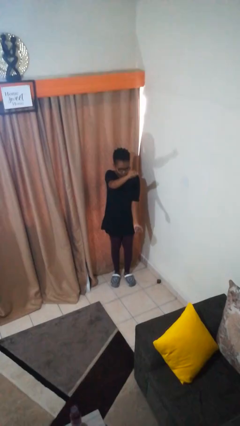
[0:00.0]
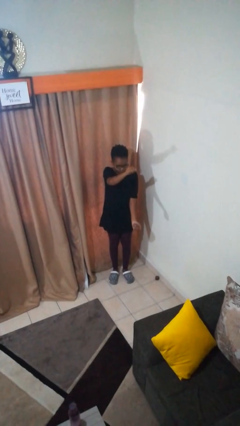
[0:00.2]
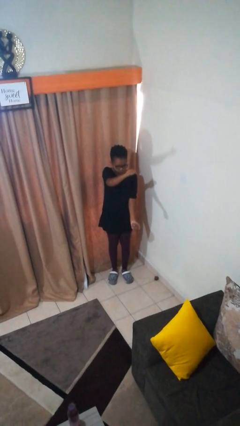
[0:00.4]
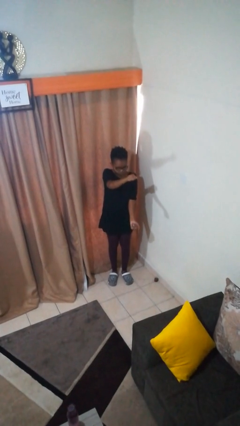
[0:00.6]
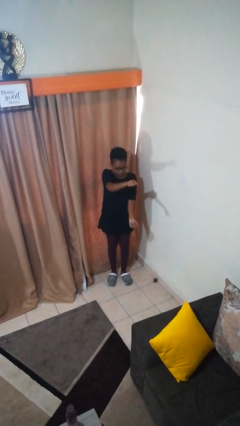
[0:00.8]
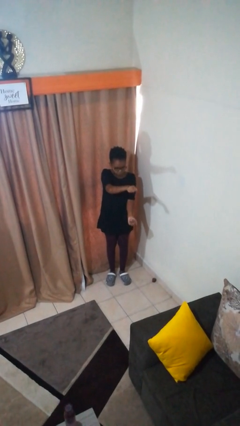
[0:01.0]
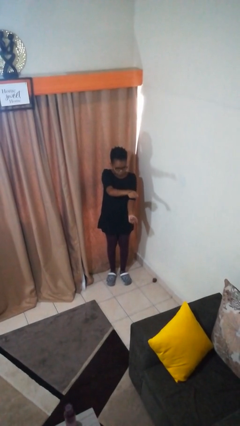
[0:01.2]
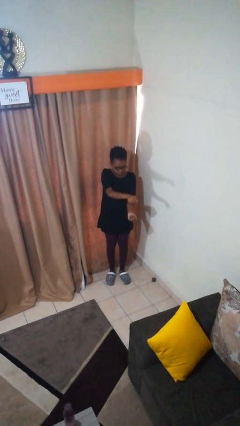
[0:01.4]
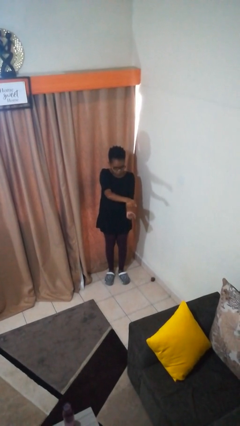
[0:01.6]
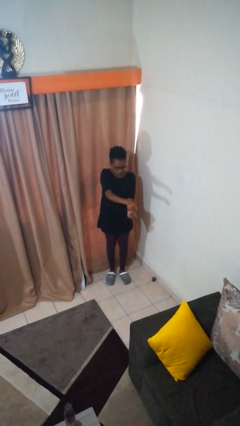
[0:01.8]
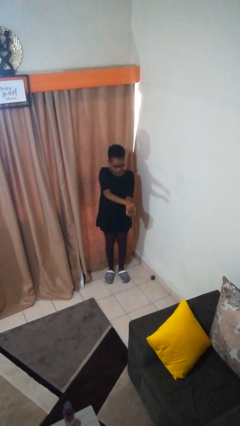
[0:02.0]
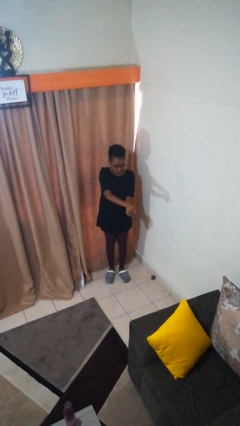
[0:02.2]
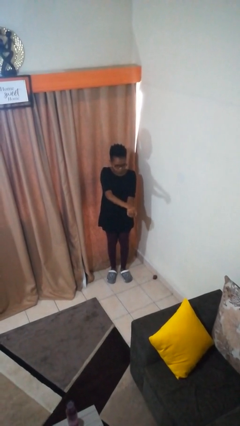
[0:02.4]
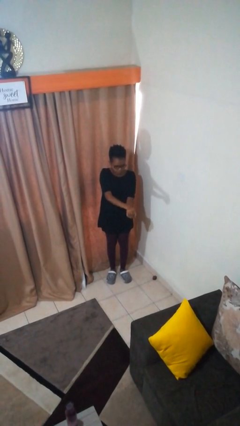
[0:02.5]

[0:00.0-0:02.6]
person gestures zoom out

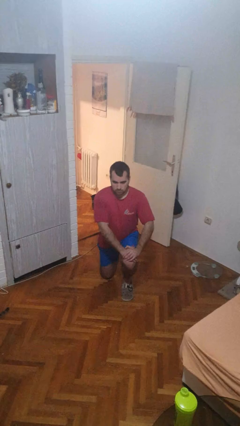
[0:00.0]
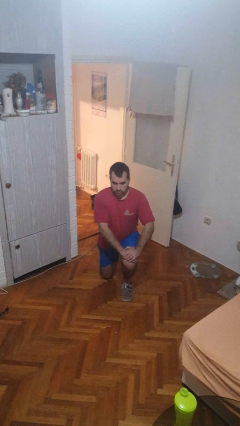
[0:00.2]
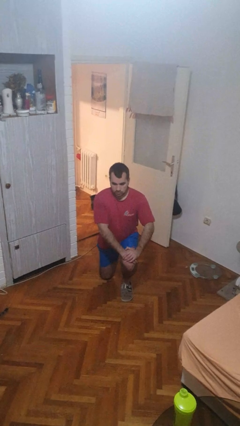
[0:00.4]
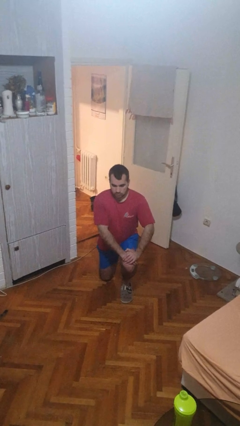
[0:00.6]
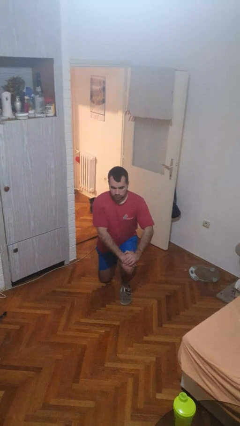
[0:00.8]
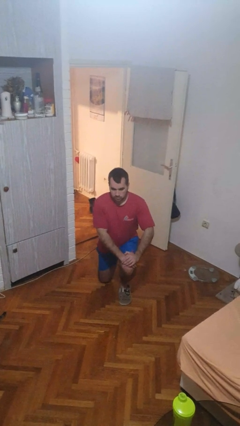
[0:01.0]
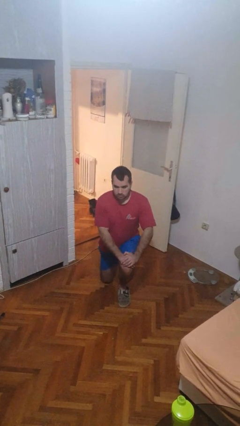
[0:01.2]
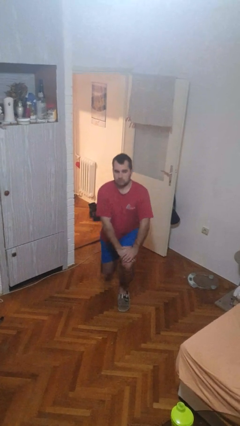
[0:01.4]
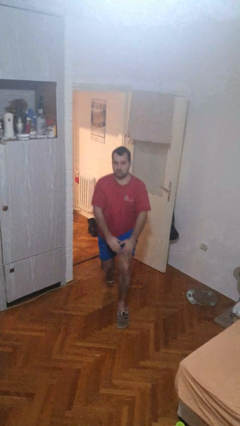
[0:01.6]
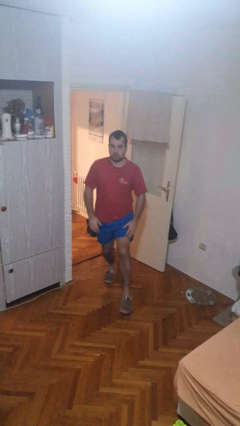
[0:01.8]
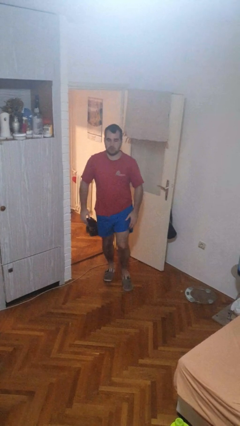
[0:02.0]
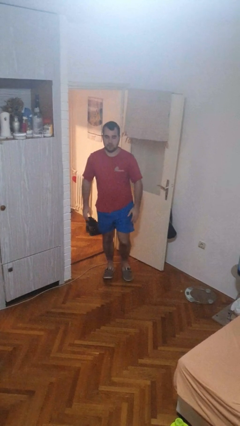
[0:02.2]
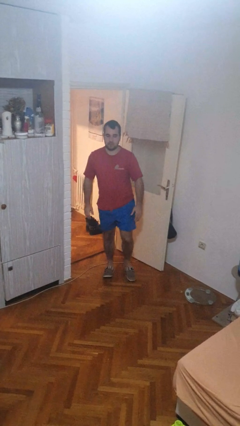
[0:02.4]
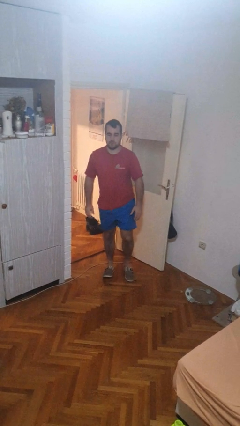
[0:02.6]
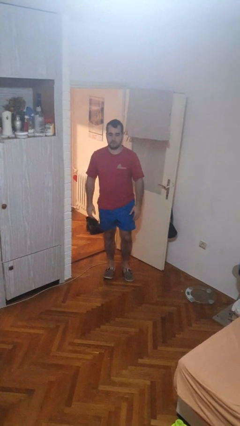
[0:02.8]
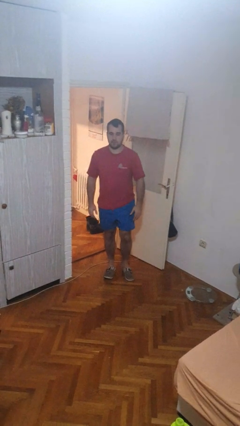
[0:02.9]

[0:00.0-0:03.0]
person stands up from floor

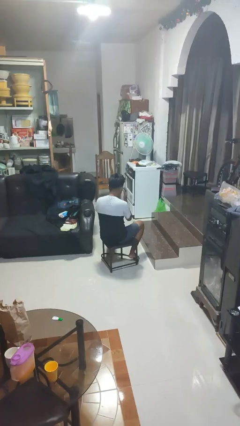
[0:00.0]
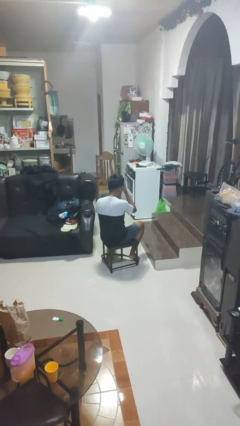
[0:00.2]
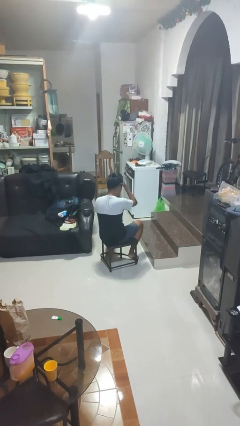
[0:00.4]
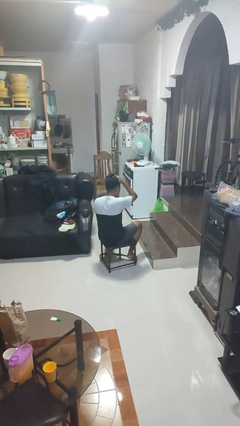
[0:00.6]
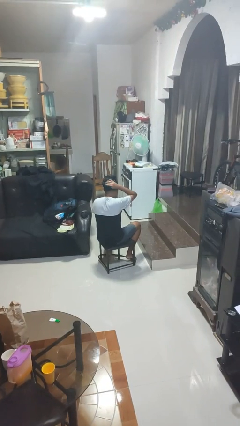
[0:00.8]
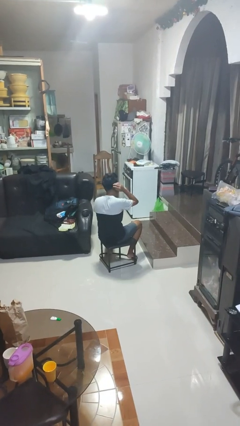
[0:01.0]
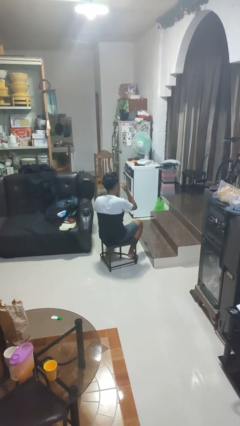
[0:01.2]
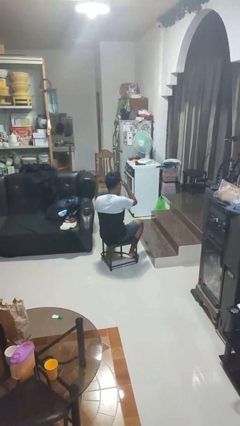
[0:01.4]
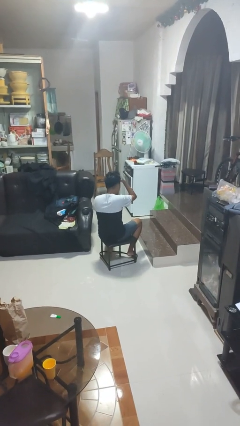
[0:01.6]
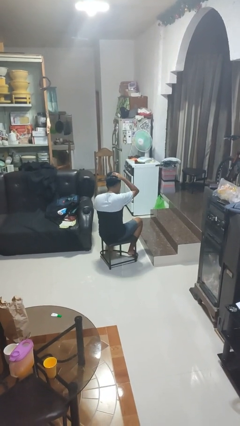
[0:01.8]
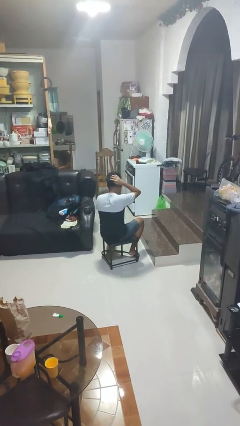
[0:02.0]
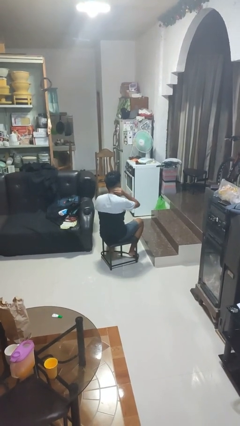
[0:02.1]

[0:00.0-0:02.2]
person strokes hair

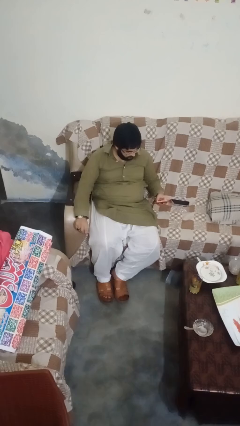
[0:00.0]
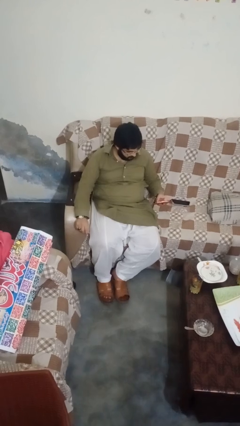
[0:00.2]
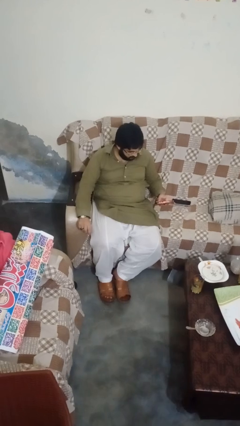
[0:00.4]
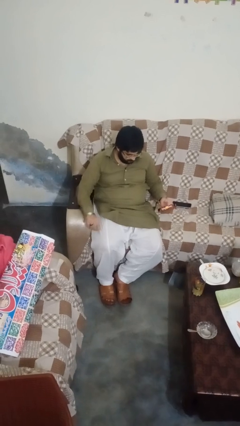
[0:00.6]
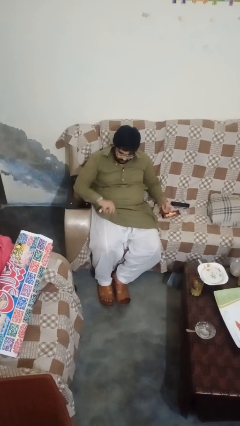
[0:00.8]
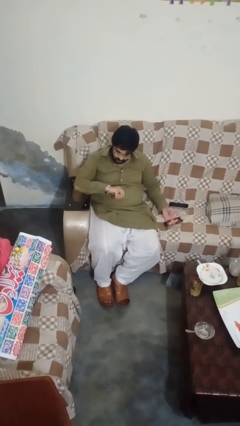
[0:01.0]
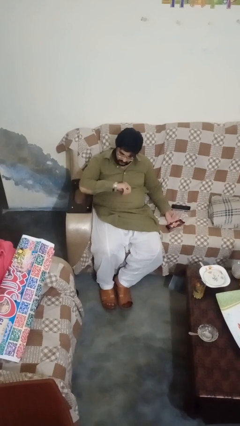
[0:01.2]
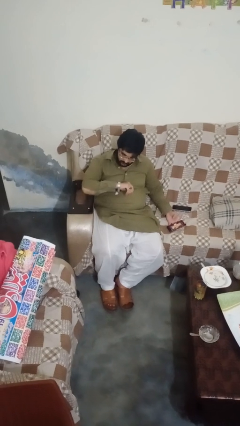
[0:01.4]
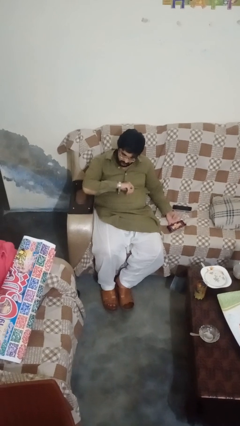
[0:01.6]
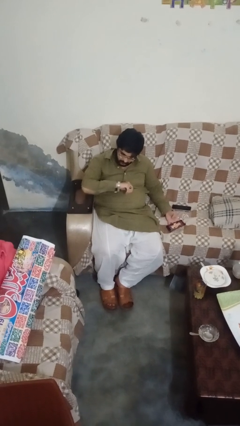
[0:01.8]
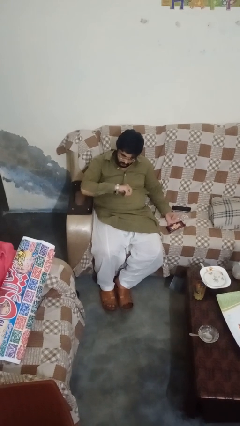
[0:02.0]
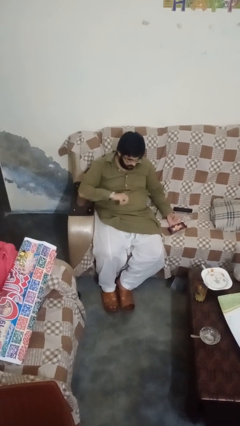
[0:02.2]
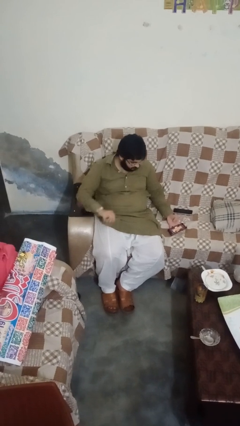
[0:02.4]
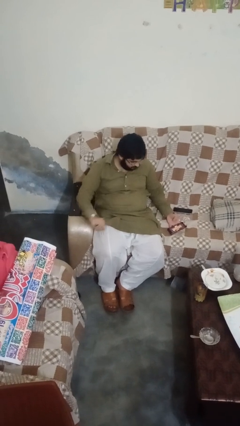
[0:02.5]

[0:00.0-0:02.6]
person looks at wristwatch

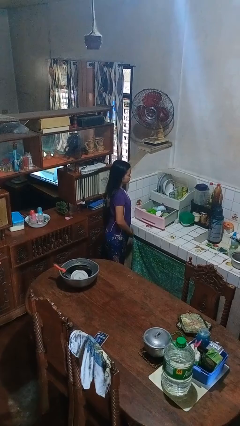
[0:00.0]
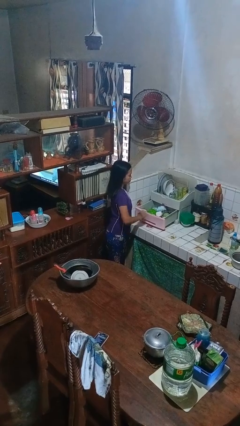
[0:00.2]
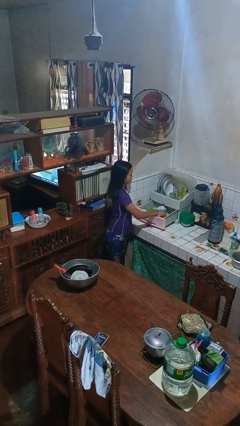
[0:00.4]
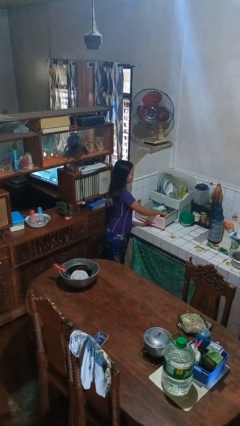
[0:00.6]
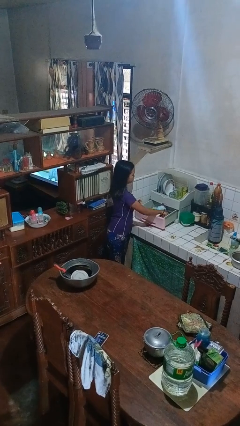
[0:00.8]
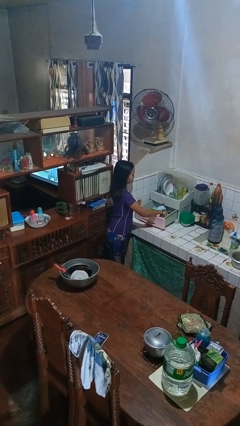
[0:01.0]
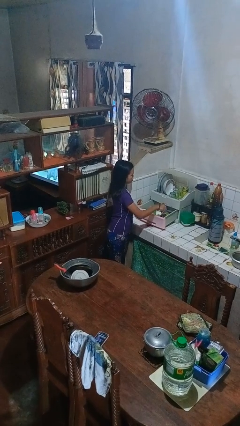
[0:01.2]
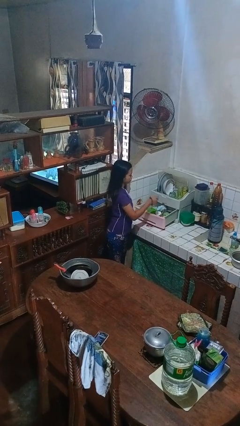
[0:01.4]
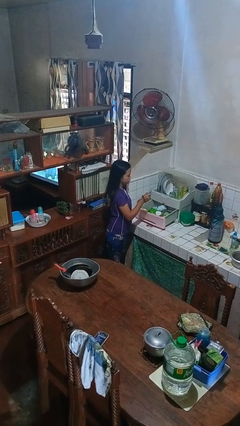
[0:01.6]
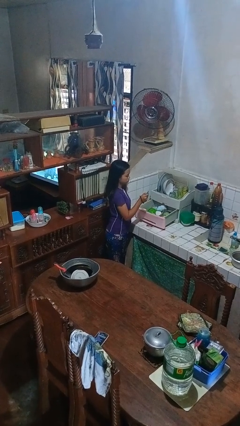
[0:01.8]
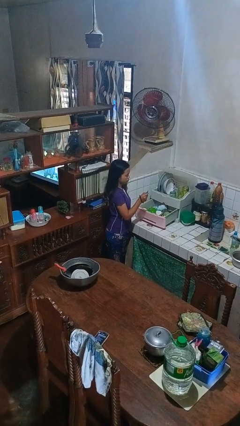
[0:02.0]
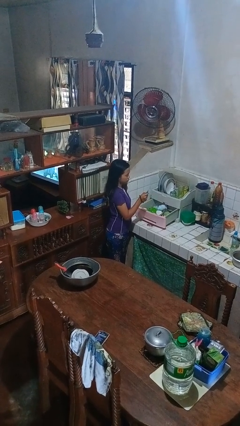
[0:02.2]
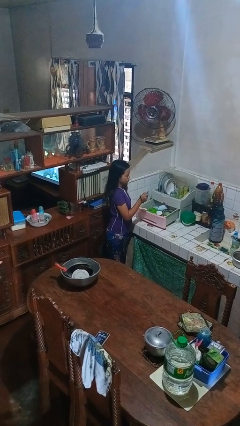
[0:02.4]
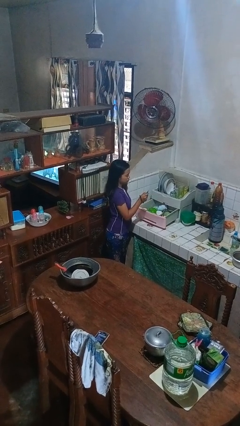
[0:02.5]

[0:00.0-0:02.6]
person takes object from kitchen drawer

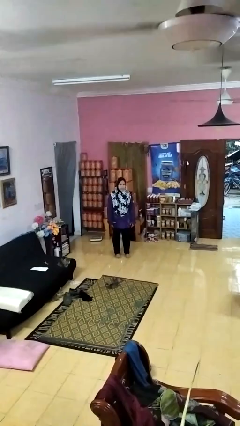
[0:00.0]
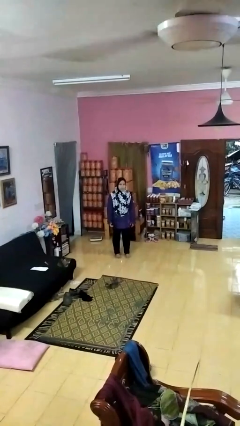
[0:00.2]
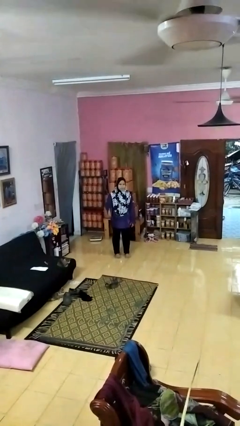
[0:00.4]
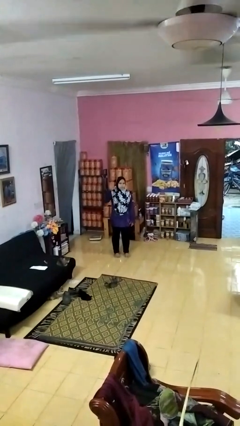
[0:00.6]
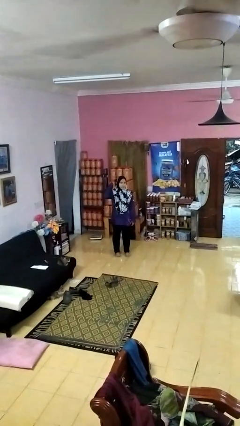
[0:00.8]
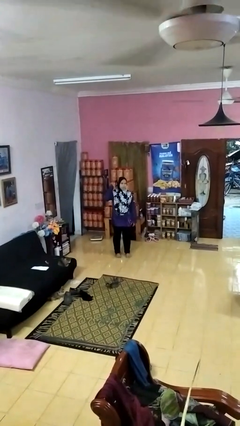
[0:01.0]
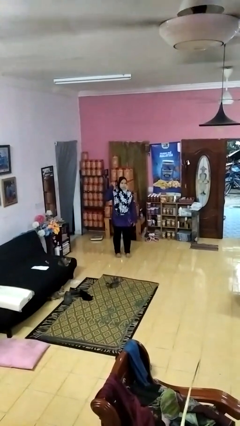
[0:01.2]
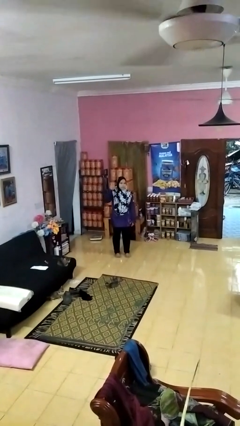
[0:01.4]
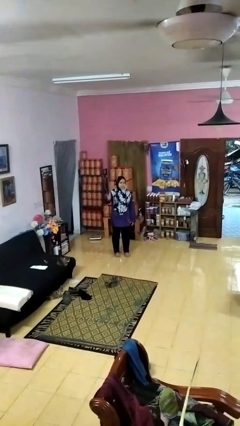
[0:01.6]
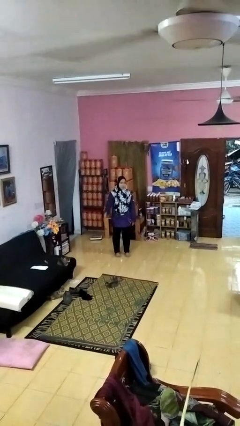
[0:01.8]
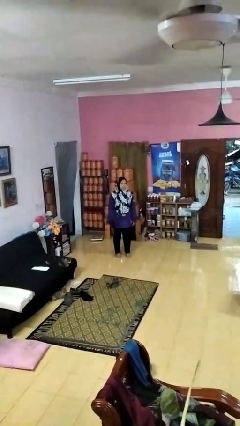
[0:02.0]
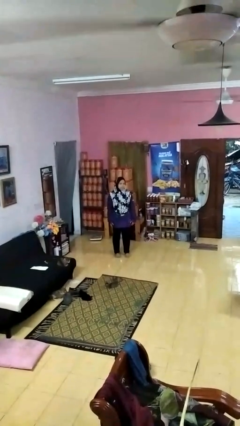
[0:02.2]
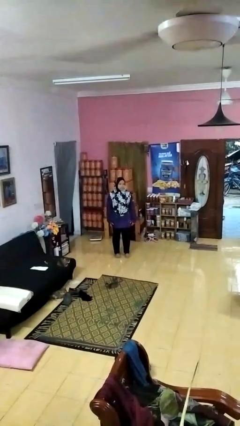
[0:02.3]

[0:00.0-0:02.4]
person gestures behind me

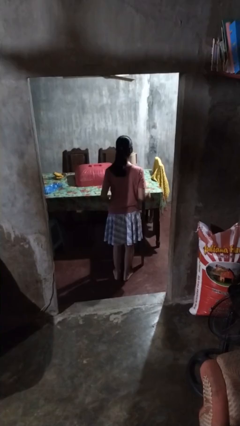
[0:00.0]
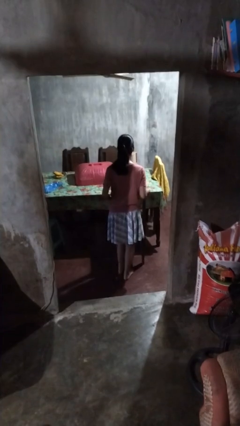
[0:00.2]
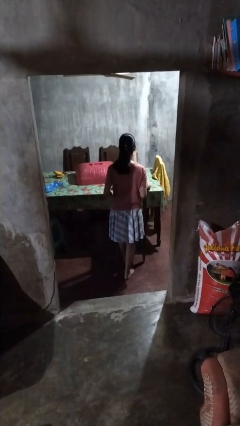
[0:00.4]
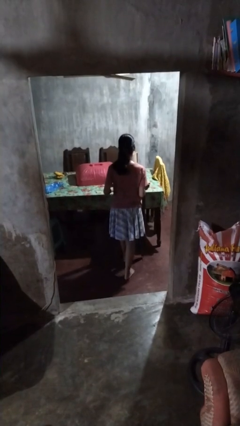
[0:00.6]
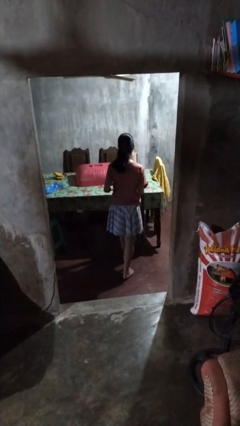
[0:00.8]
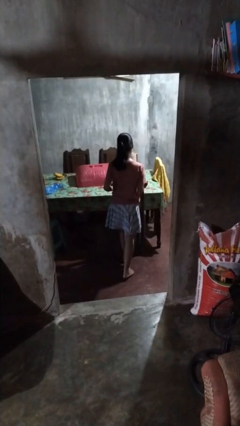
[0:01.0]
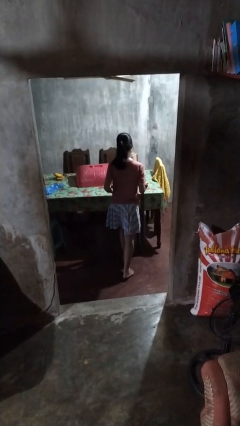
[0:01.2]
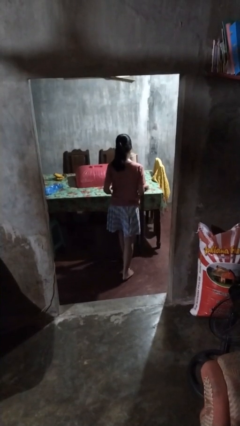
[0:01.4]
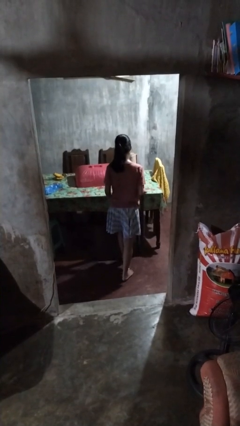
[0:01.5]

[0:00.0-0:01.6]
person pushes in chair
